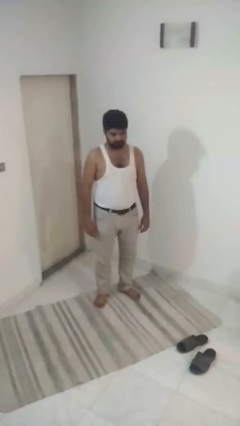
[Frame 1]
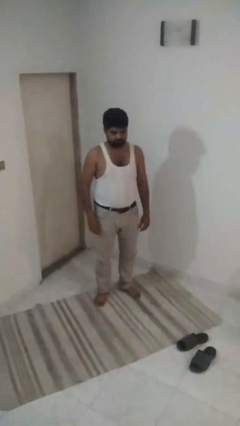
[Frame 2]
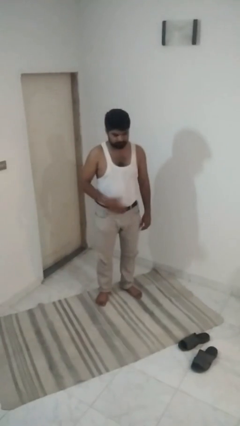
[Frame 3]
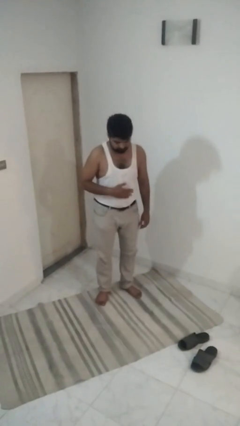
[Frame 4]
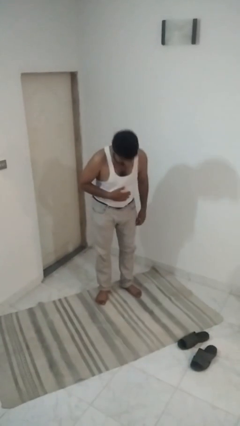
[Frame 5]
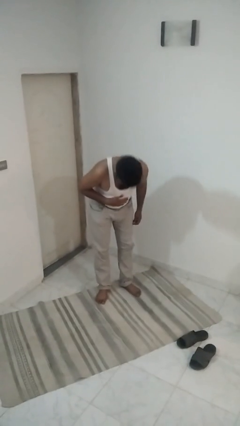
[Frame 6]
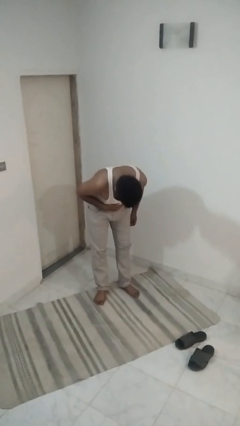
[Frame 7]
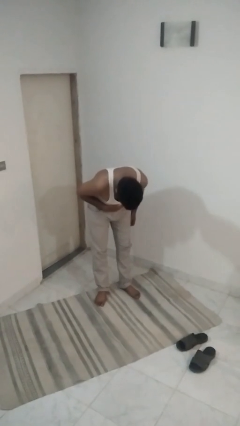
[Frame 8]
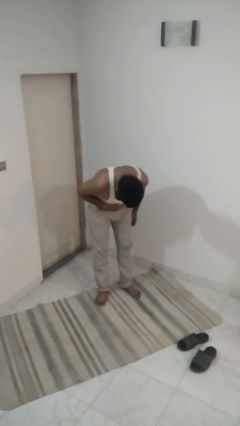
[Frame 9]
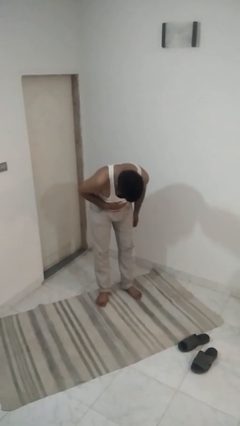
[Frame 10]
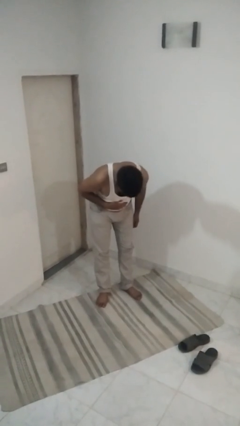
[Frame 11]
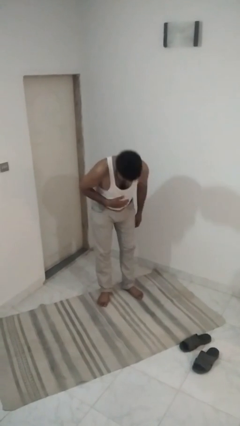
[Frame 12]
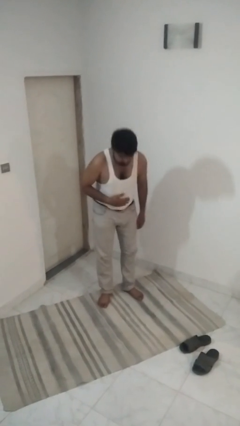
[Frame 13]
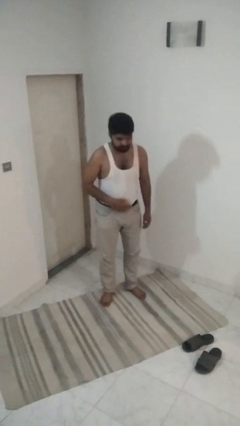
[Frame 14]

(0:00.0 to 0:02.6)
person bows

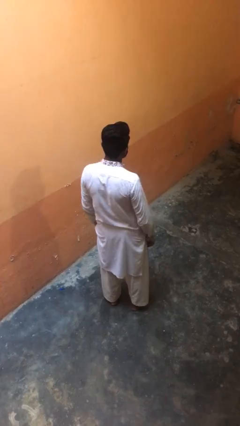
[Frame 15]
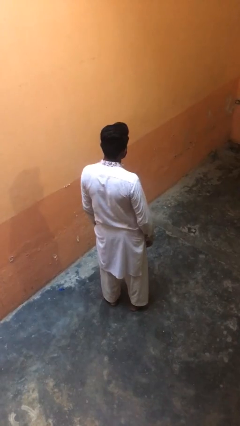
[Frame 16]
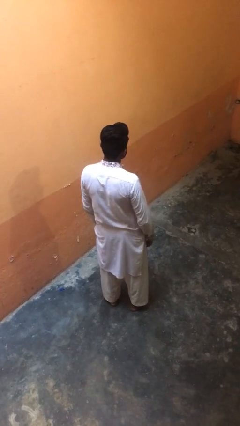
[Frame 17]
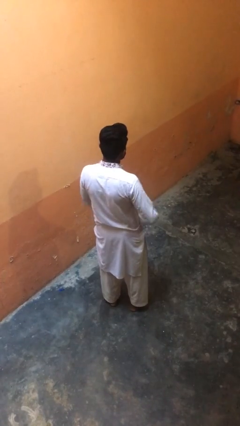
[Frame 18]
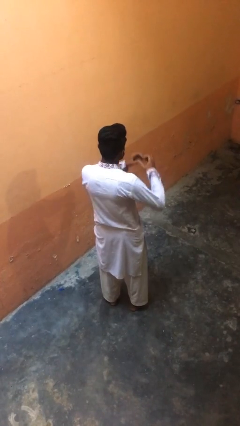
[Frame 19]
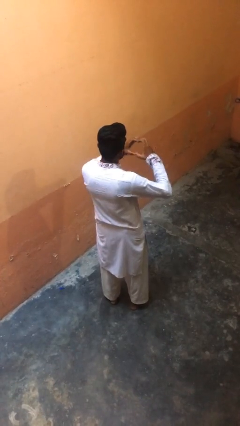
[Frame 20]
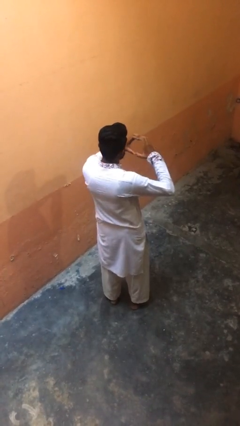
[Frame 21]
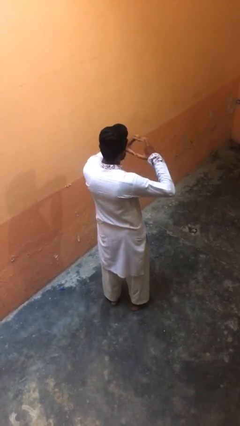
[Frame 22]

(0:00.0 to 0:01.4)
person gestures heart

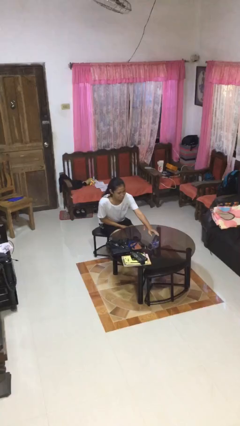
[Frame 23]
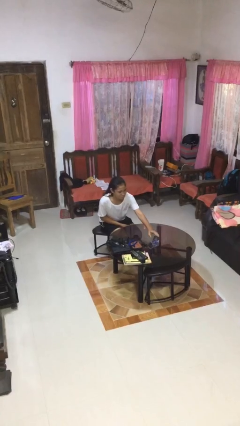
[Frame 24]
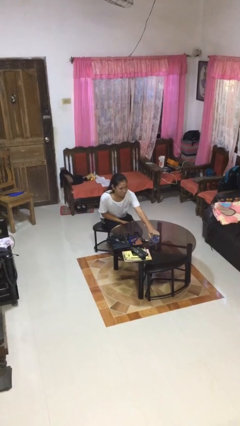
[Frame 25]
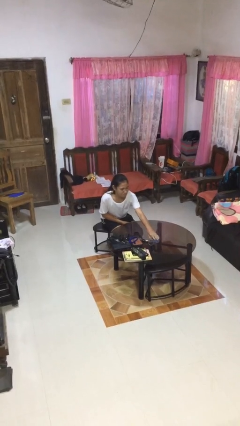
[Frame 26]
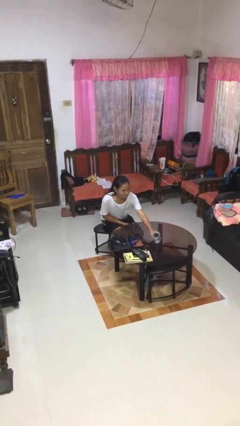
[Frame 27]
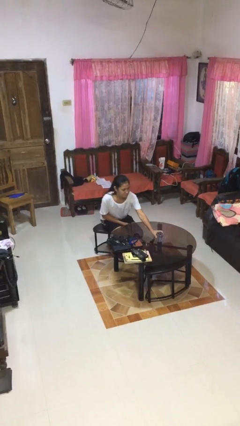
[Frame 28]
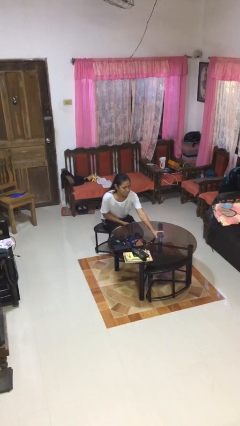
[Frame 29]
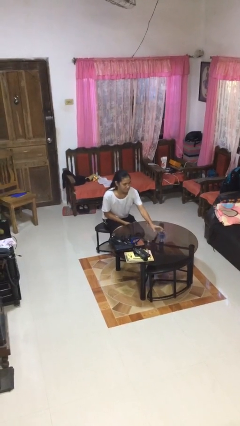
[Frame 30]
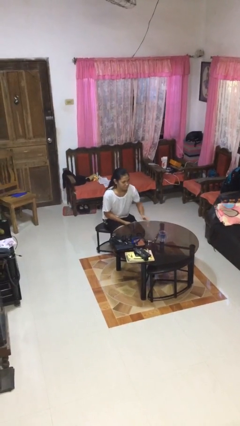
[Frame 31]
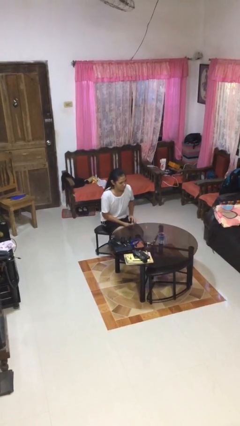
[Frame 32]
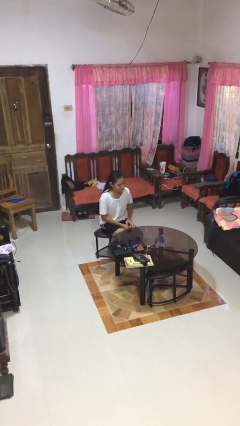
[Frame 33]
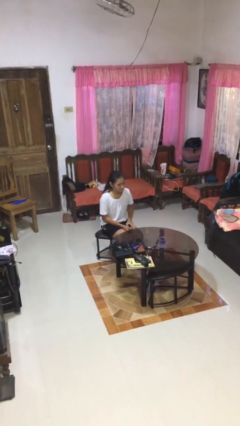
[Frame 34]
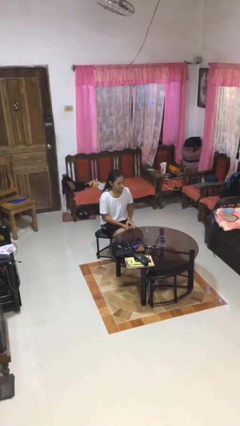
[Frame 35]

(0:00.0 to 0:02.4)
person sets upright glass

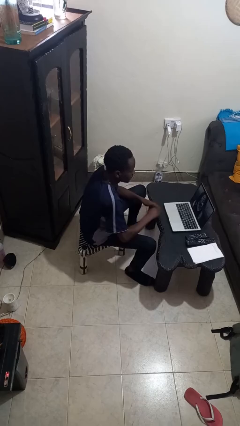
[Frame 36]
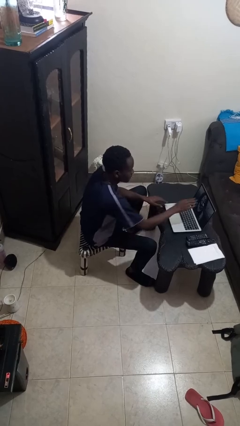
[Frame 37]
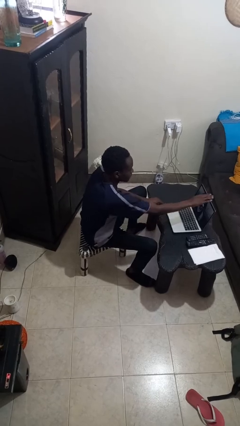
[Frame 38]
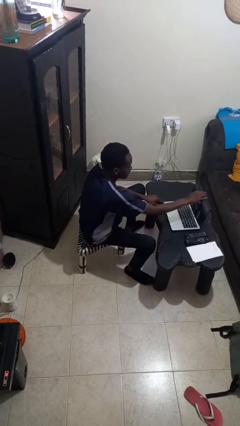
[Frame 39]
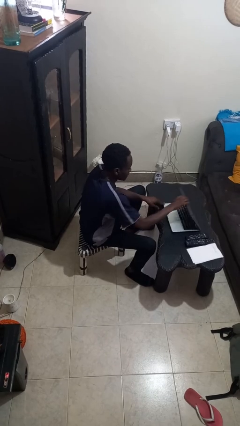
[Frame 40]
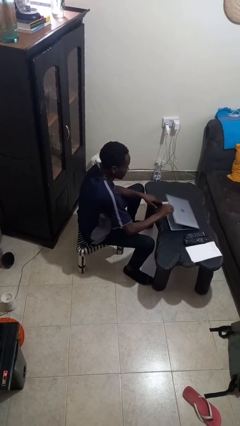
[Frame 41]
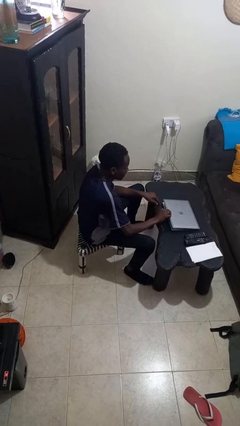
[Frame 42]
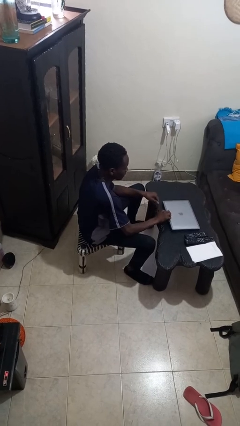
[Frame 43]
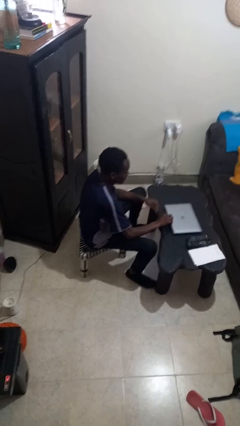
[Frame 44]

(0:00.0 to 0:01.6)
person closes laptop

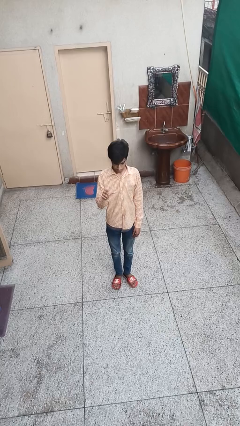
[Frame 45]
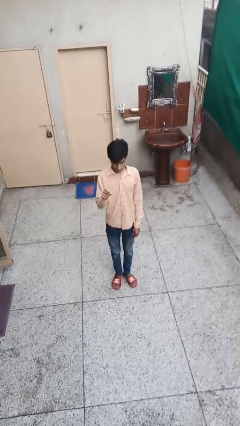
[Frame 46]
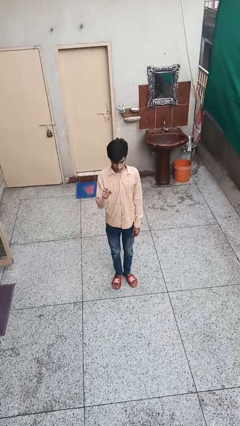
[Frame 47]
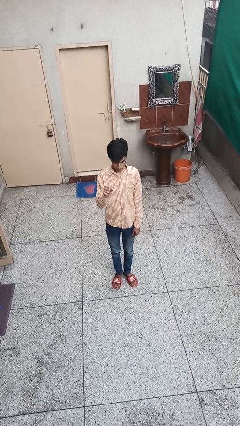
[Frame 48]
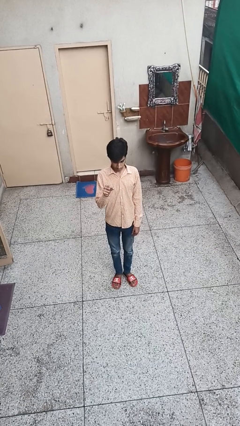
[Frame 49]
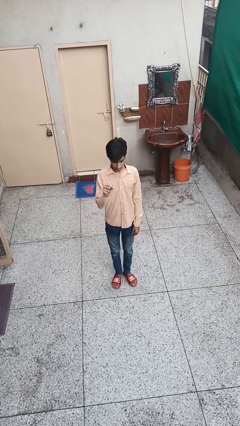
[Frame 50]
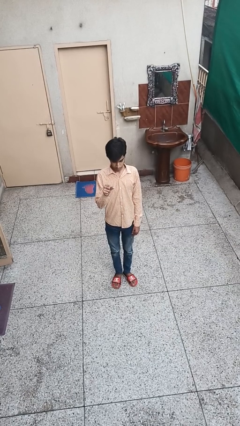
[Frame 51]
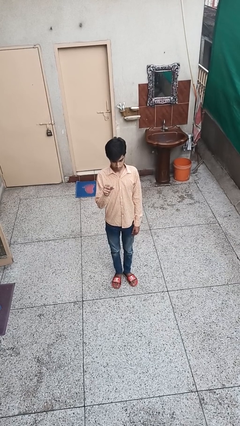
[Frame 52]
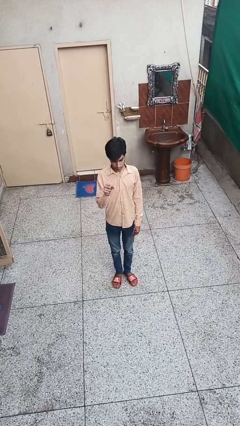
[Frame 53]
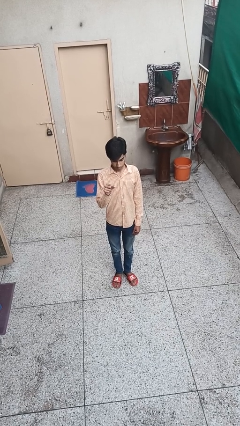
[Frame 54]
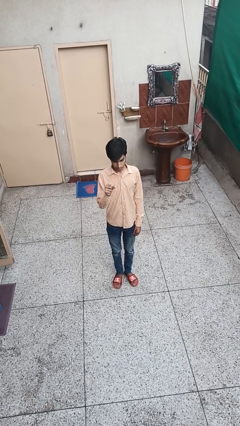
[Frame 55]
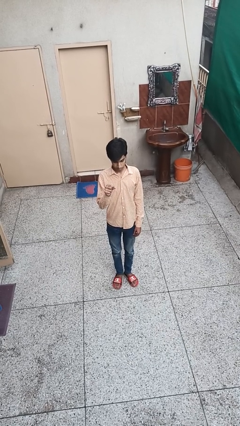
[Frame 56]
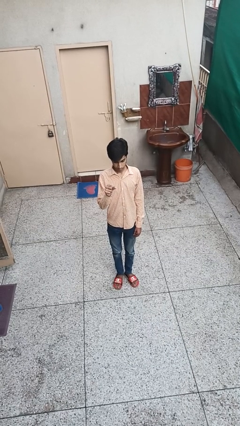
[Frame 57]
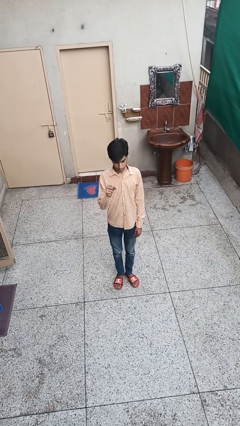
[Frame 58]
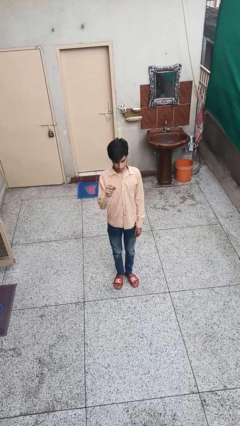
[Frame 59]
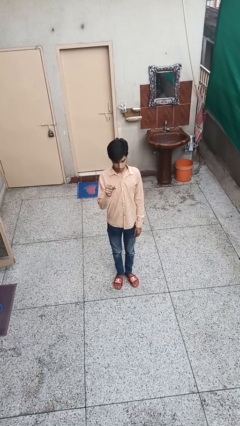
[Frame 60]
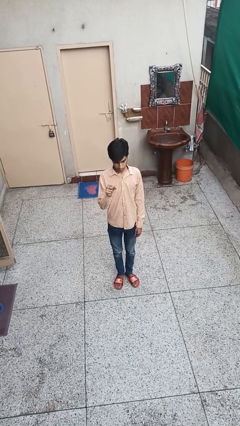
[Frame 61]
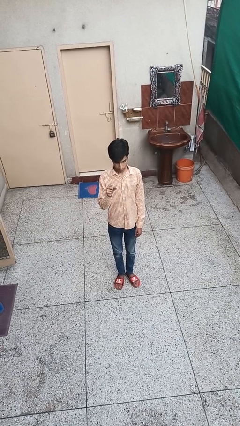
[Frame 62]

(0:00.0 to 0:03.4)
person gestures zoom out

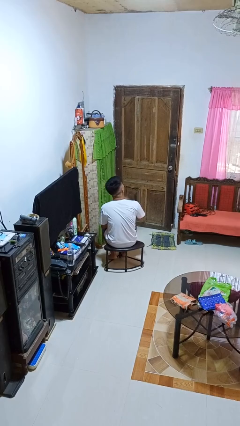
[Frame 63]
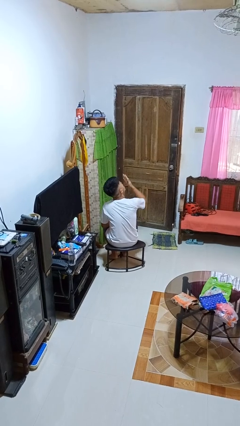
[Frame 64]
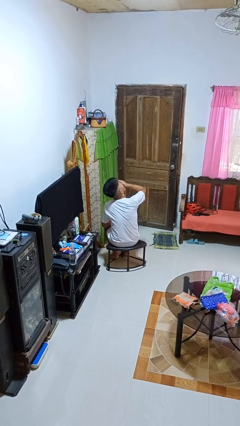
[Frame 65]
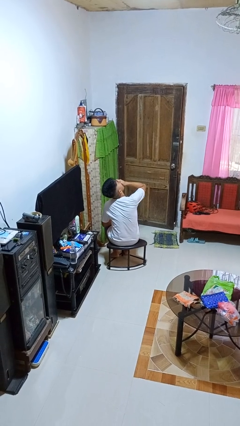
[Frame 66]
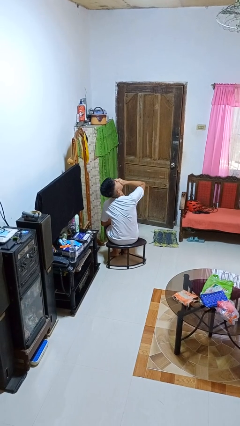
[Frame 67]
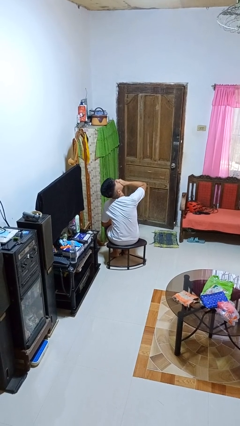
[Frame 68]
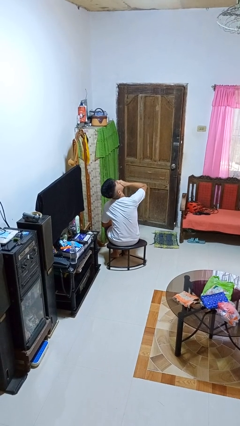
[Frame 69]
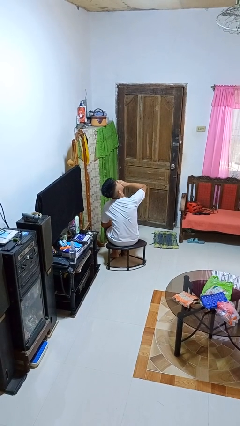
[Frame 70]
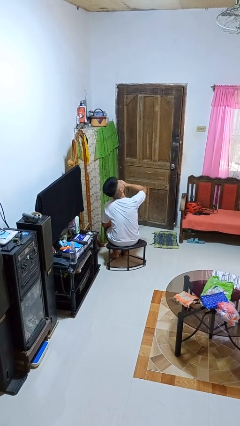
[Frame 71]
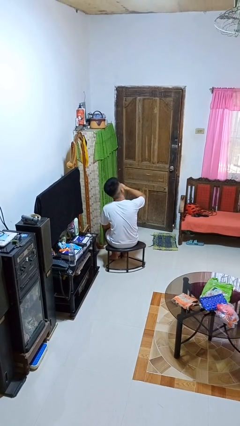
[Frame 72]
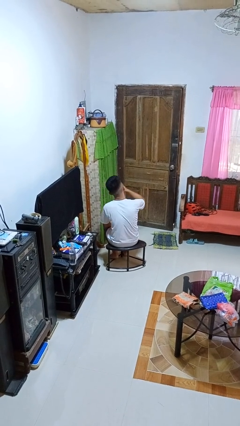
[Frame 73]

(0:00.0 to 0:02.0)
person yawns

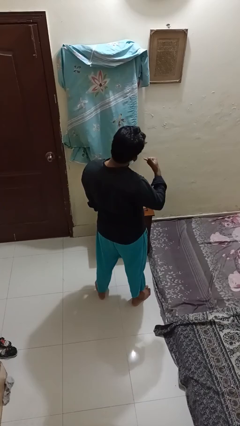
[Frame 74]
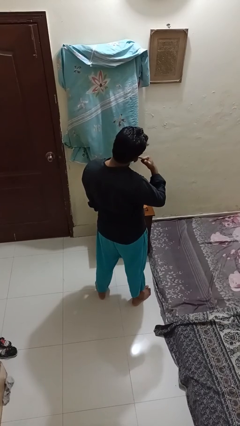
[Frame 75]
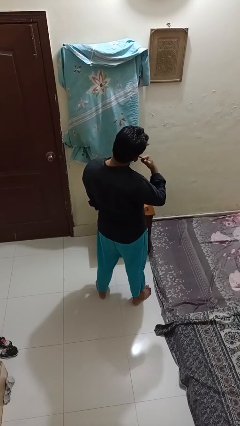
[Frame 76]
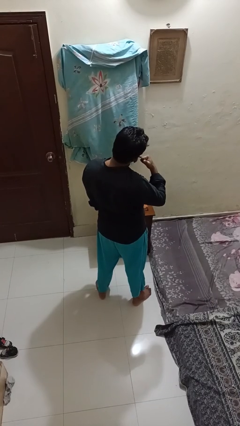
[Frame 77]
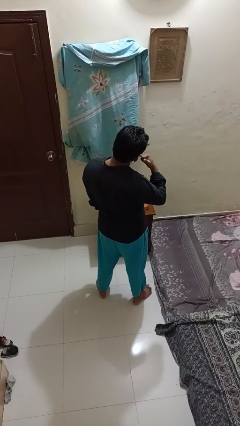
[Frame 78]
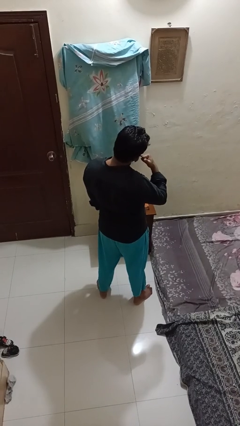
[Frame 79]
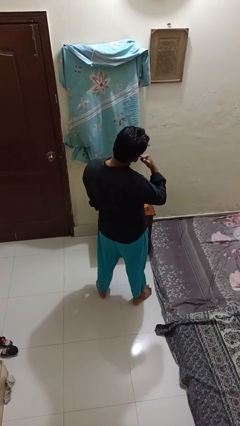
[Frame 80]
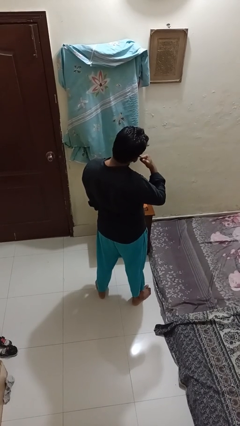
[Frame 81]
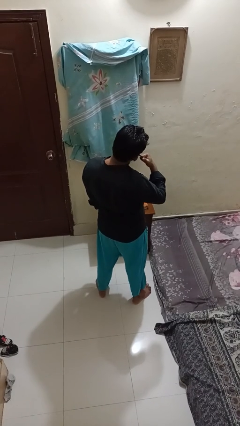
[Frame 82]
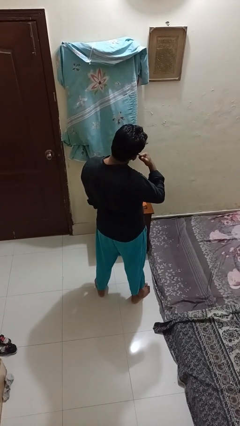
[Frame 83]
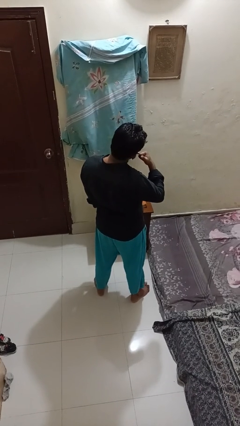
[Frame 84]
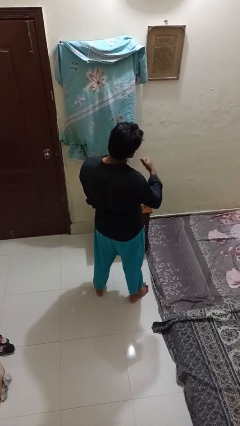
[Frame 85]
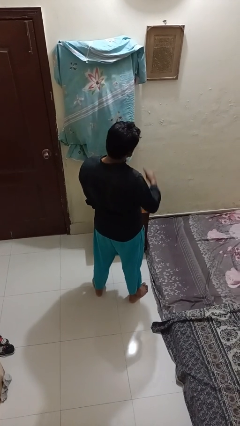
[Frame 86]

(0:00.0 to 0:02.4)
person gestures call me

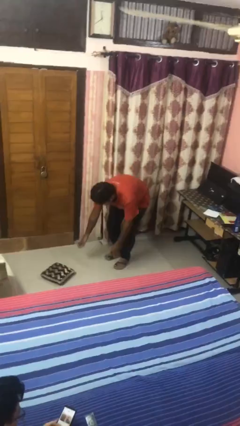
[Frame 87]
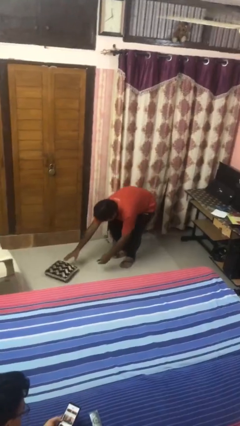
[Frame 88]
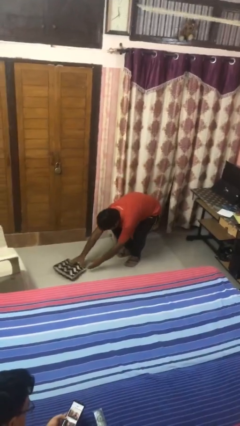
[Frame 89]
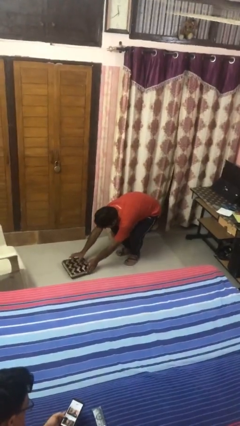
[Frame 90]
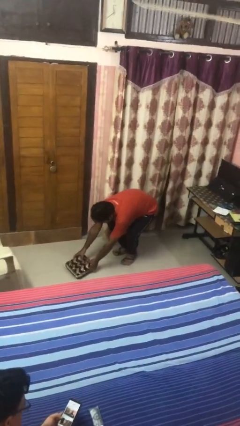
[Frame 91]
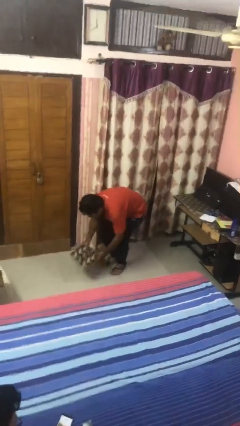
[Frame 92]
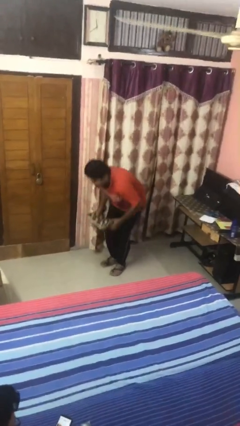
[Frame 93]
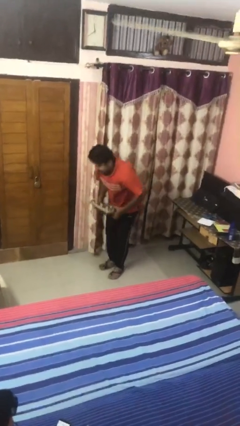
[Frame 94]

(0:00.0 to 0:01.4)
person picks up object from floor
